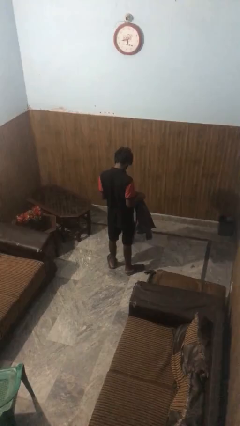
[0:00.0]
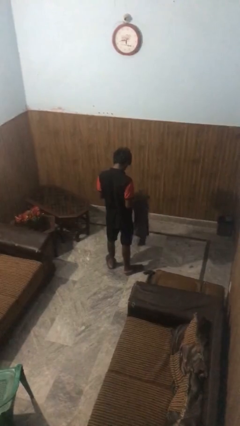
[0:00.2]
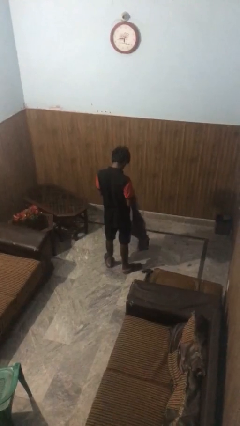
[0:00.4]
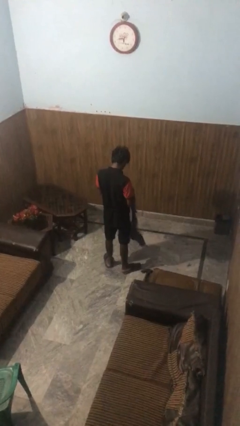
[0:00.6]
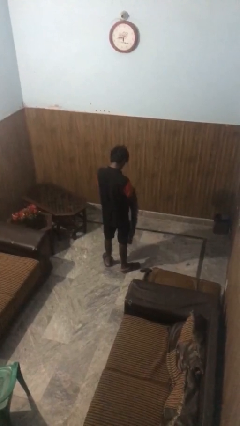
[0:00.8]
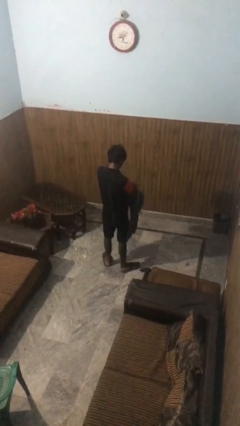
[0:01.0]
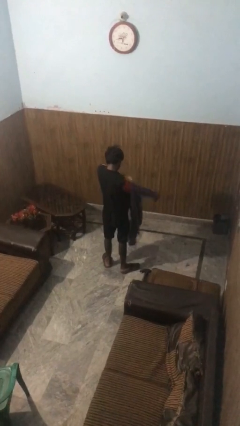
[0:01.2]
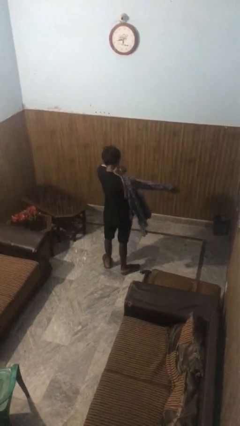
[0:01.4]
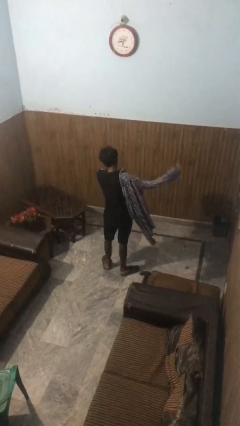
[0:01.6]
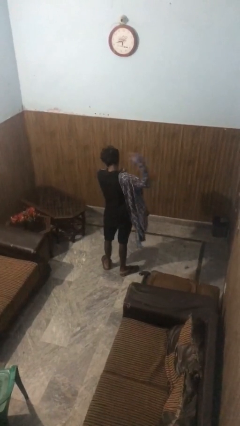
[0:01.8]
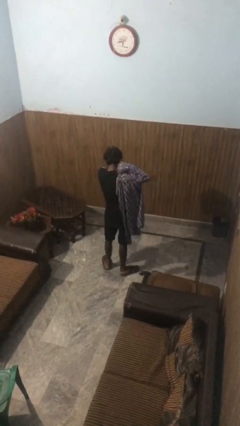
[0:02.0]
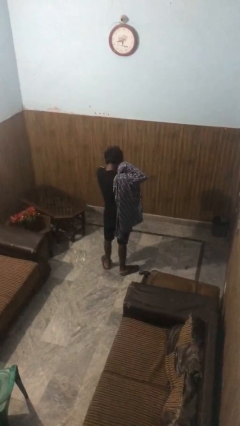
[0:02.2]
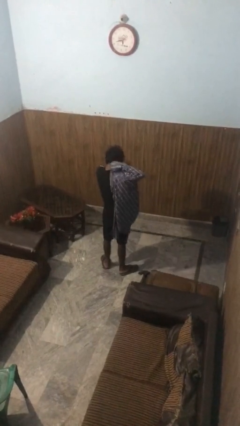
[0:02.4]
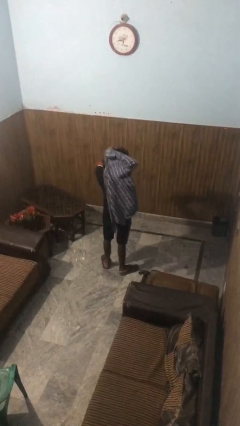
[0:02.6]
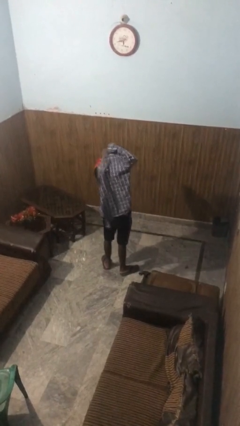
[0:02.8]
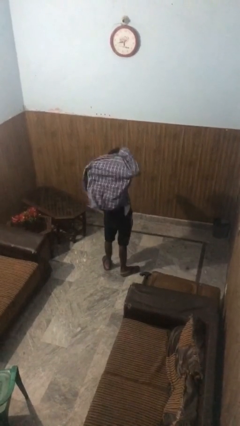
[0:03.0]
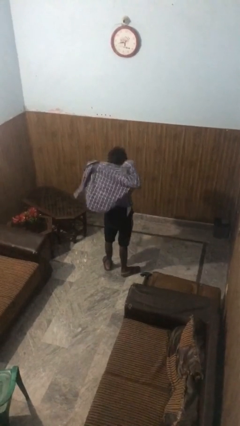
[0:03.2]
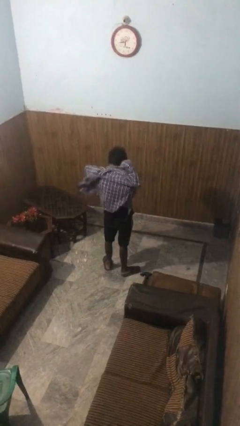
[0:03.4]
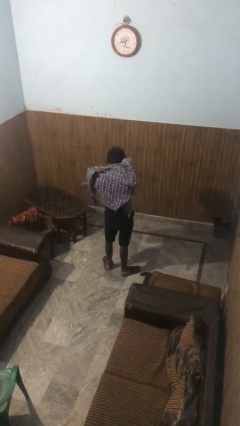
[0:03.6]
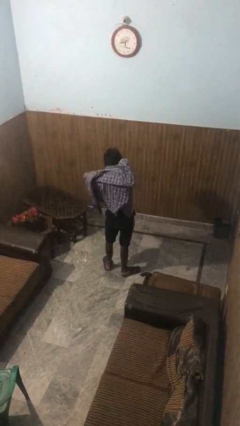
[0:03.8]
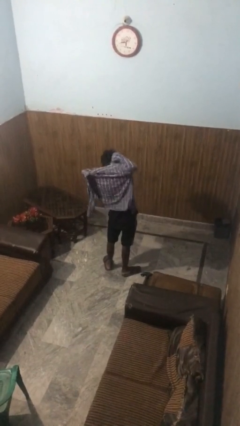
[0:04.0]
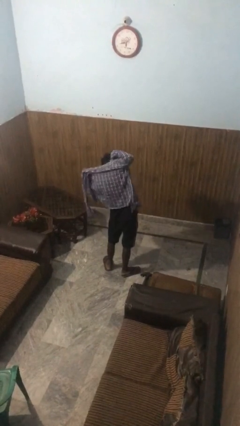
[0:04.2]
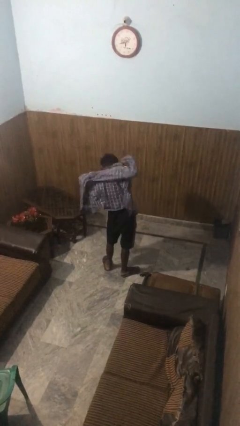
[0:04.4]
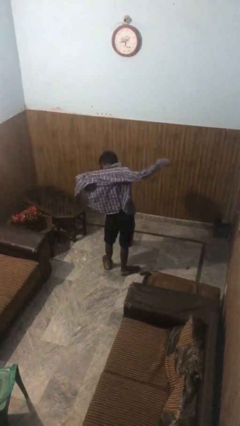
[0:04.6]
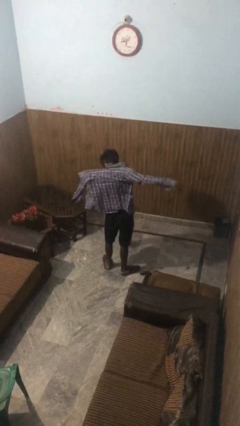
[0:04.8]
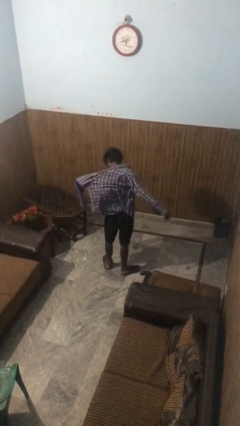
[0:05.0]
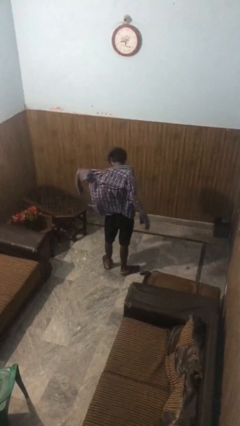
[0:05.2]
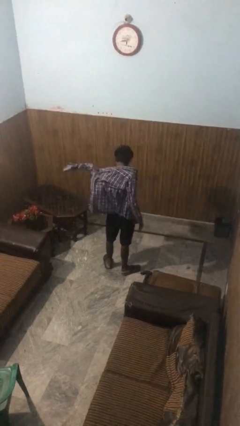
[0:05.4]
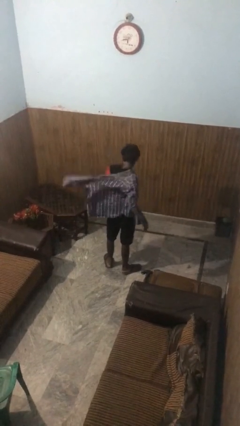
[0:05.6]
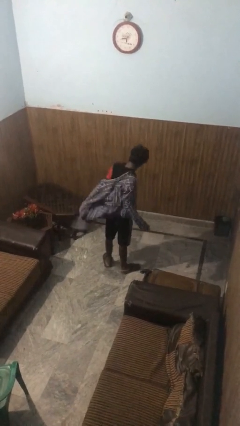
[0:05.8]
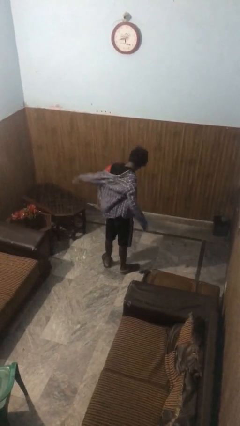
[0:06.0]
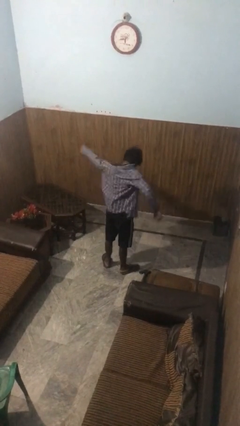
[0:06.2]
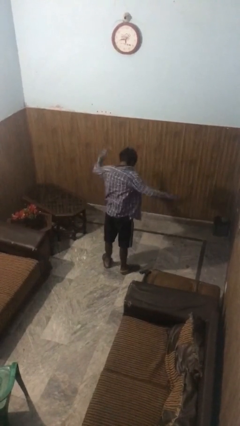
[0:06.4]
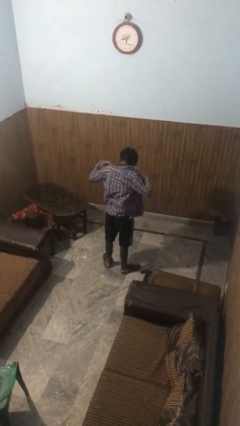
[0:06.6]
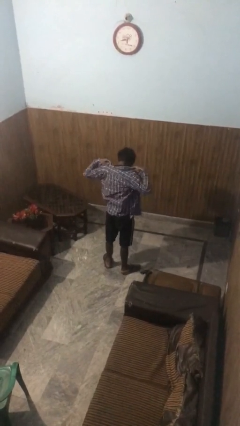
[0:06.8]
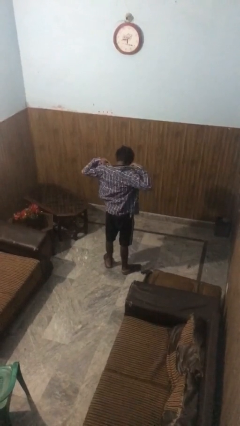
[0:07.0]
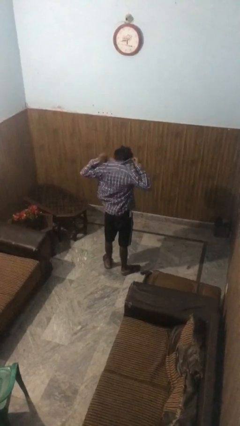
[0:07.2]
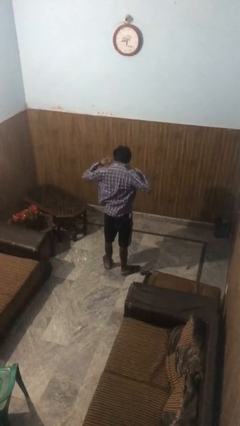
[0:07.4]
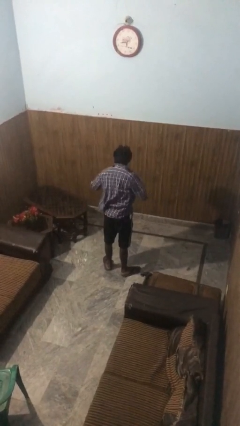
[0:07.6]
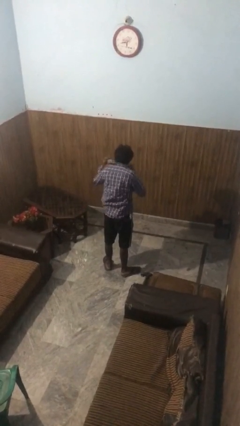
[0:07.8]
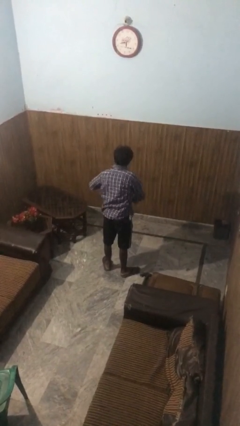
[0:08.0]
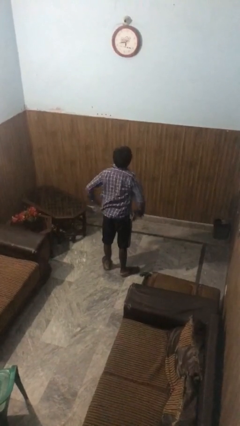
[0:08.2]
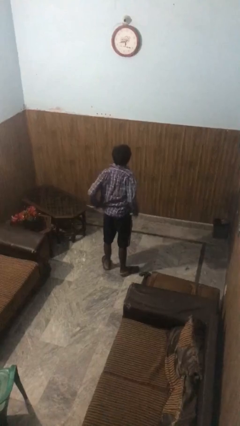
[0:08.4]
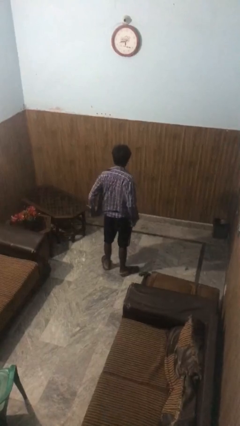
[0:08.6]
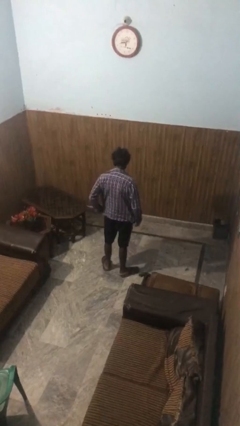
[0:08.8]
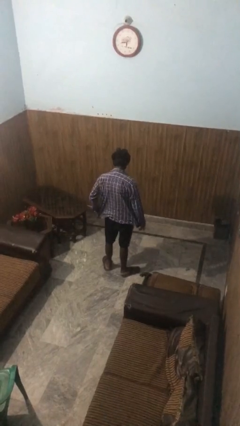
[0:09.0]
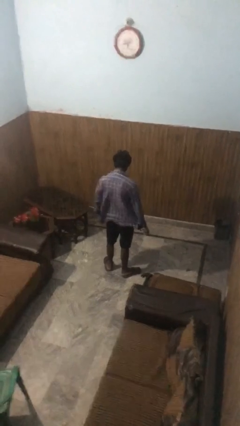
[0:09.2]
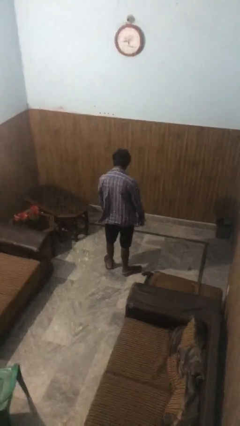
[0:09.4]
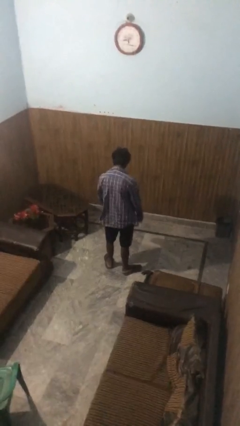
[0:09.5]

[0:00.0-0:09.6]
person puts on shirt

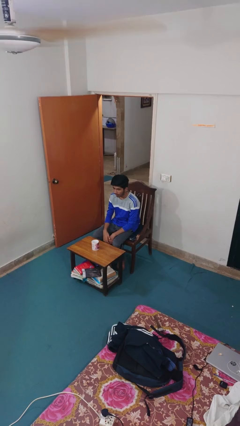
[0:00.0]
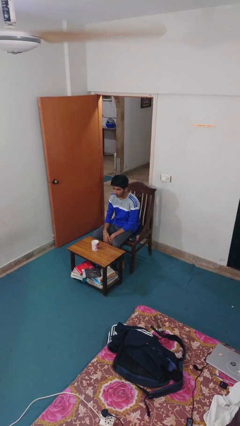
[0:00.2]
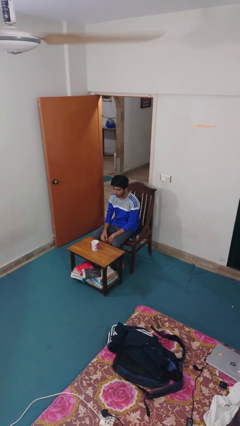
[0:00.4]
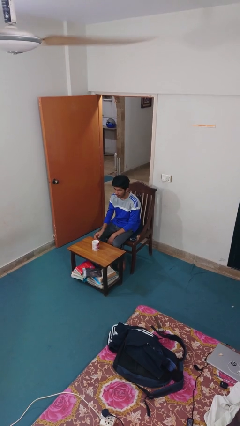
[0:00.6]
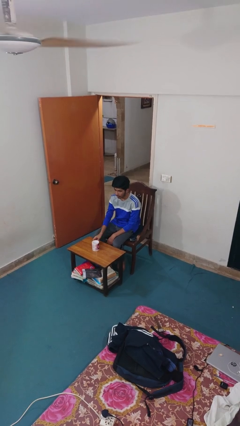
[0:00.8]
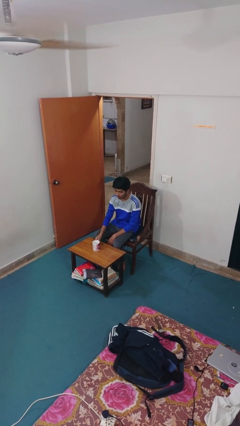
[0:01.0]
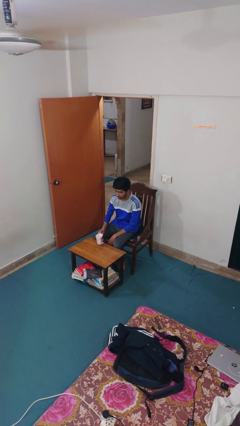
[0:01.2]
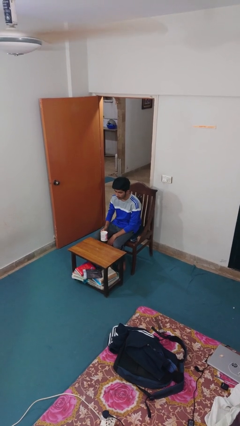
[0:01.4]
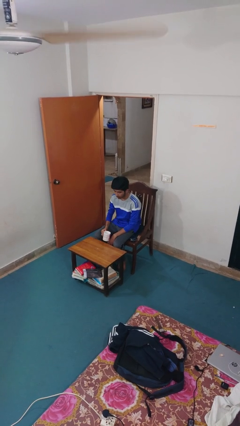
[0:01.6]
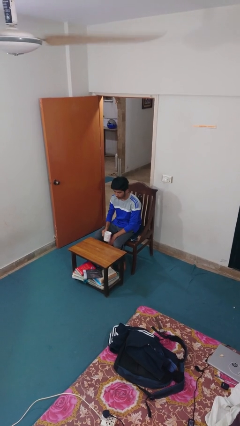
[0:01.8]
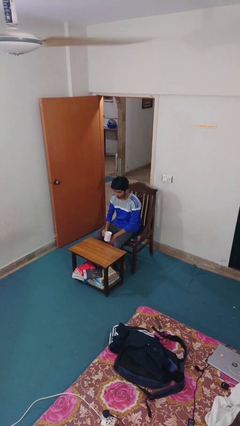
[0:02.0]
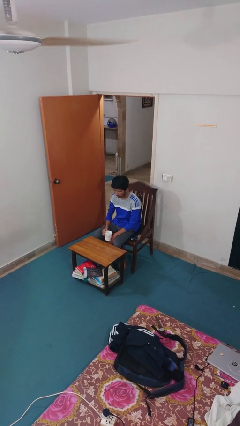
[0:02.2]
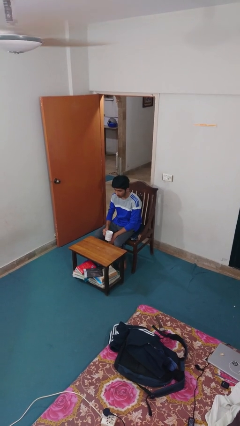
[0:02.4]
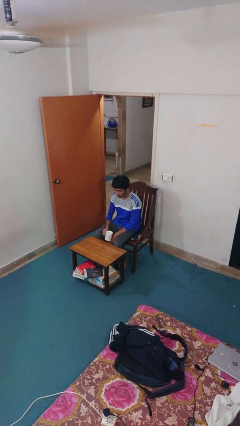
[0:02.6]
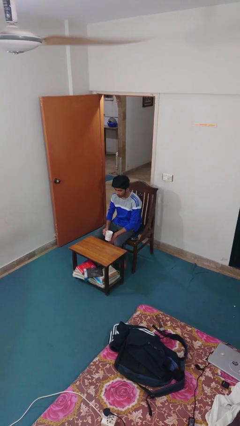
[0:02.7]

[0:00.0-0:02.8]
person picks up object from table

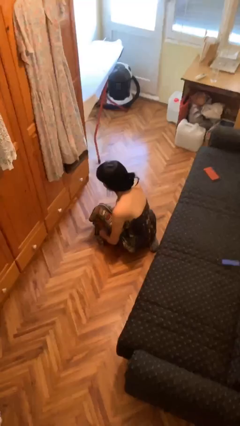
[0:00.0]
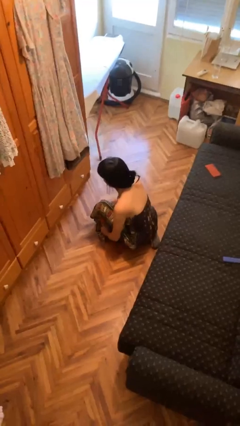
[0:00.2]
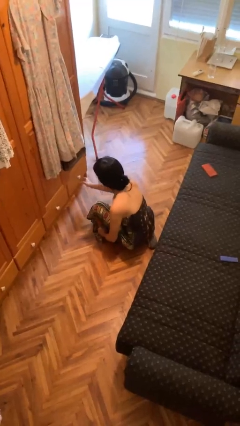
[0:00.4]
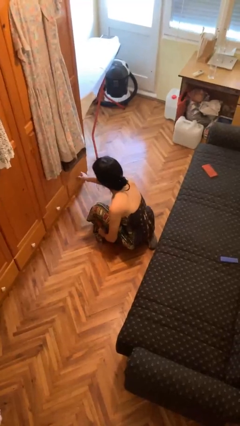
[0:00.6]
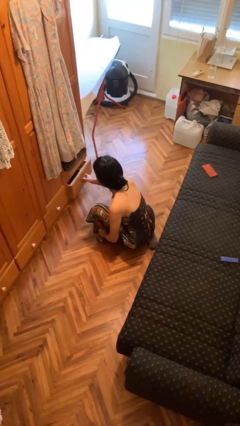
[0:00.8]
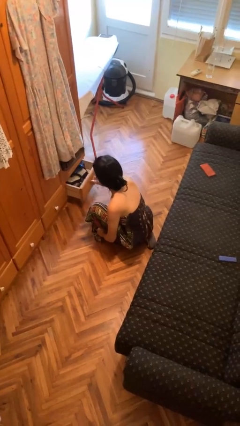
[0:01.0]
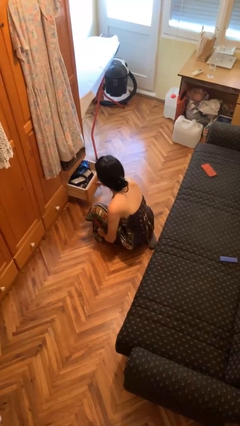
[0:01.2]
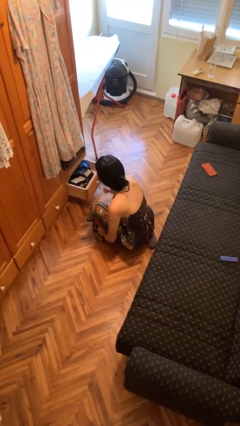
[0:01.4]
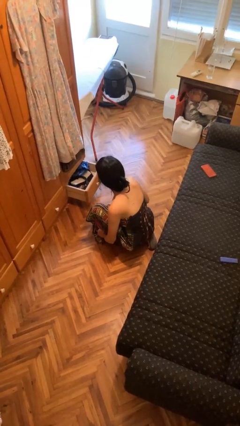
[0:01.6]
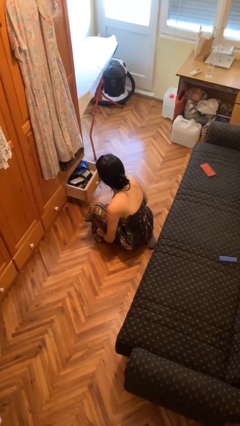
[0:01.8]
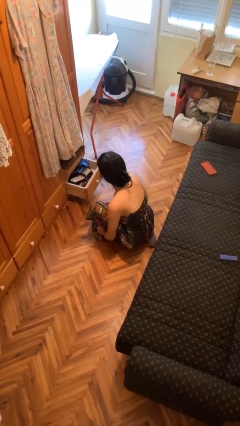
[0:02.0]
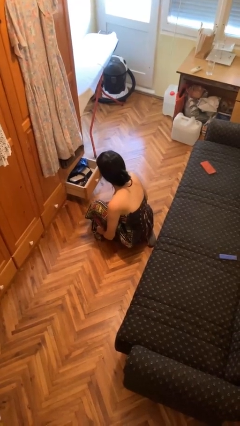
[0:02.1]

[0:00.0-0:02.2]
person opens dresser drawer

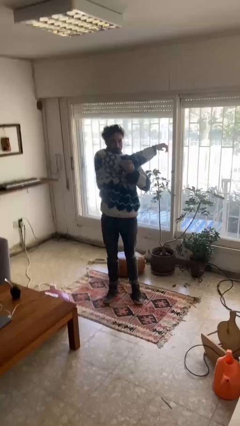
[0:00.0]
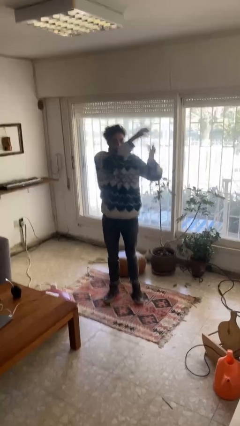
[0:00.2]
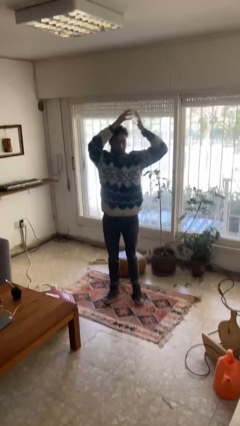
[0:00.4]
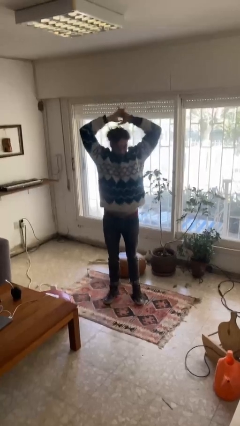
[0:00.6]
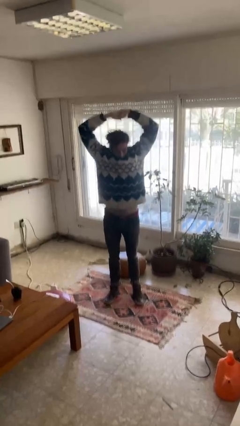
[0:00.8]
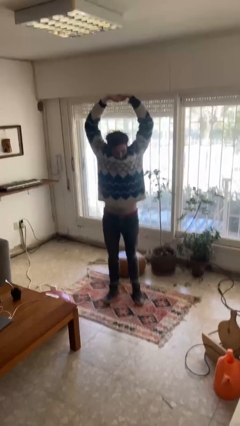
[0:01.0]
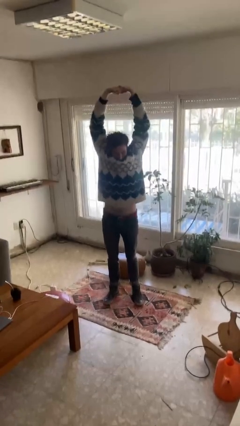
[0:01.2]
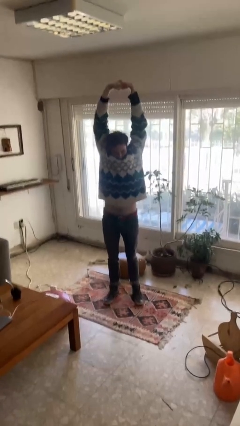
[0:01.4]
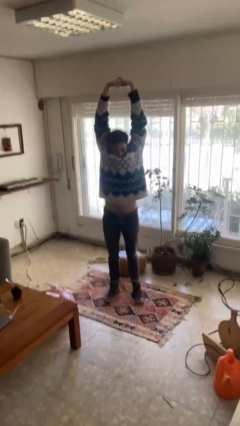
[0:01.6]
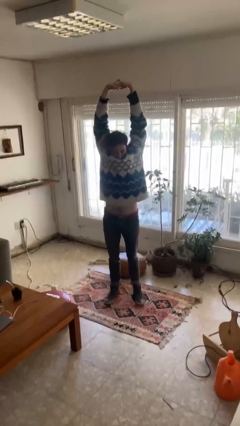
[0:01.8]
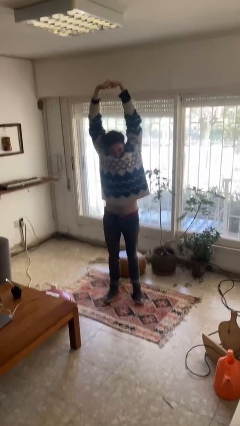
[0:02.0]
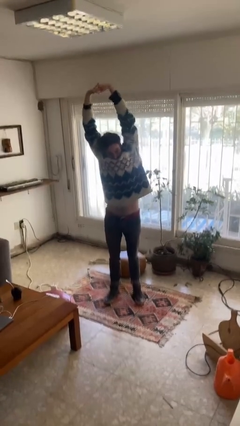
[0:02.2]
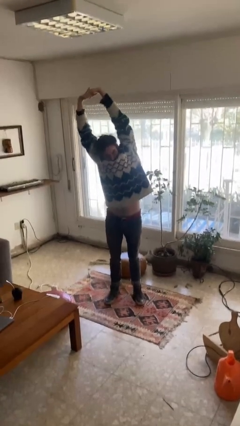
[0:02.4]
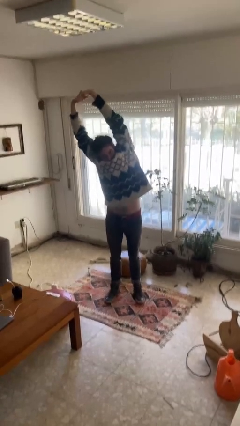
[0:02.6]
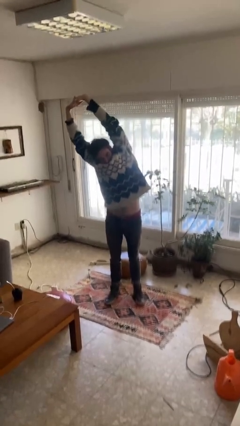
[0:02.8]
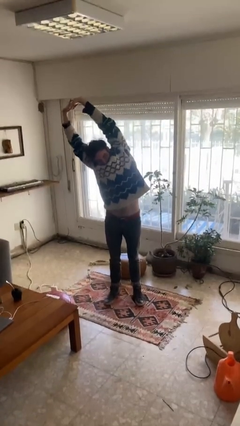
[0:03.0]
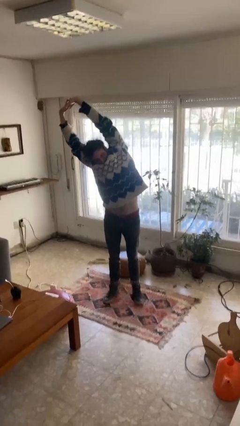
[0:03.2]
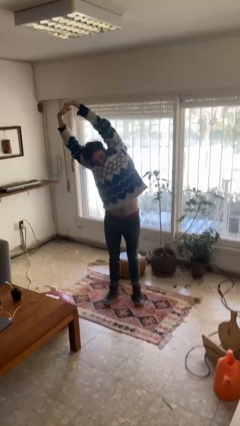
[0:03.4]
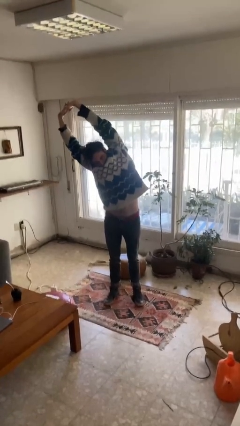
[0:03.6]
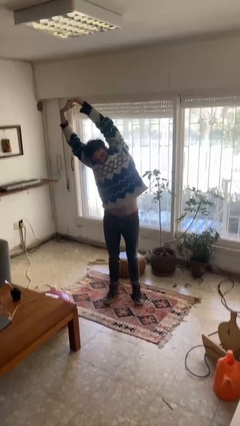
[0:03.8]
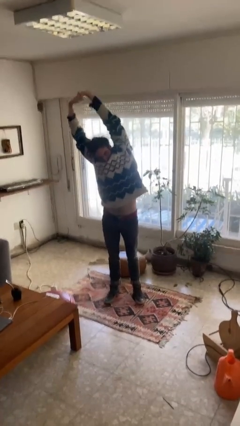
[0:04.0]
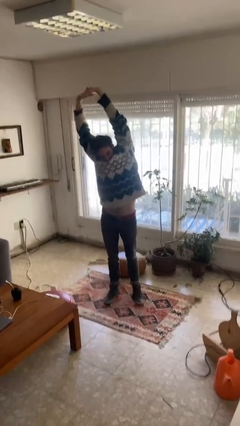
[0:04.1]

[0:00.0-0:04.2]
person stretches arms over head
